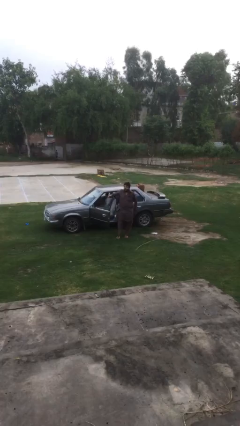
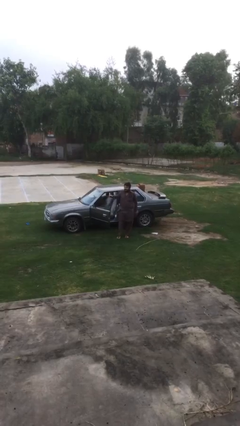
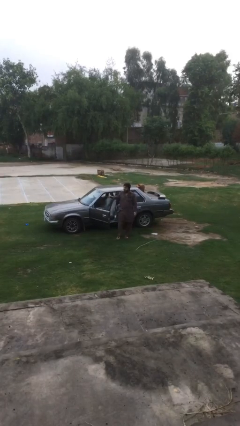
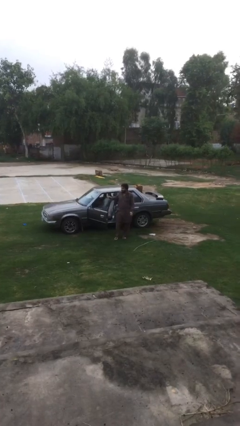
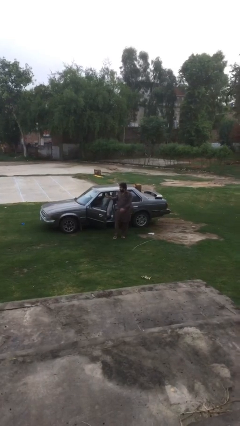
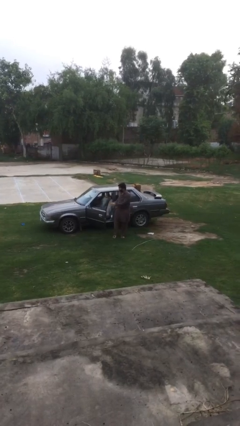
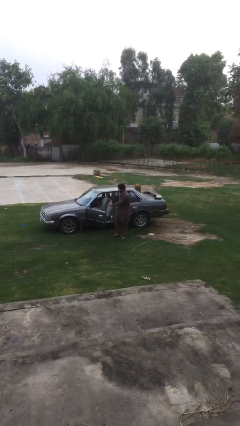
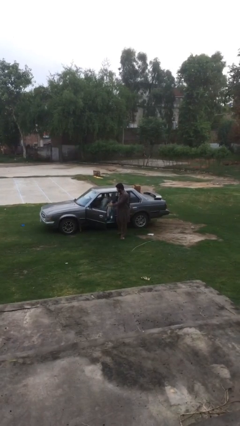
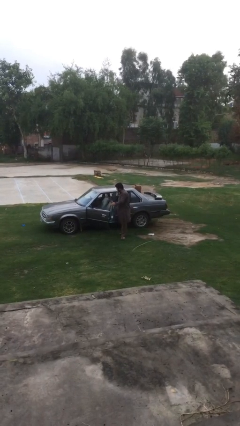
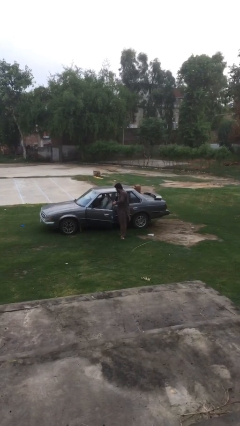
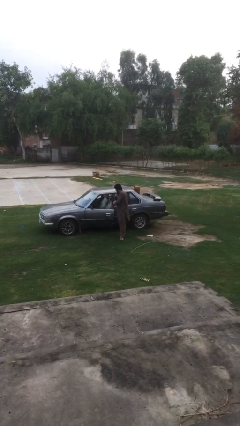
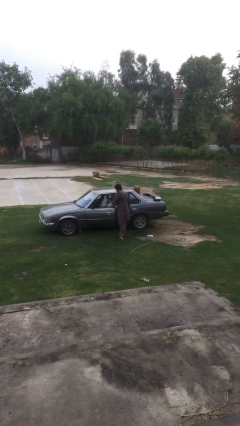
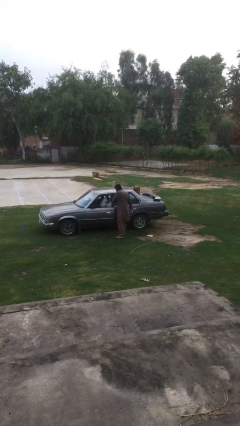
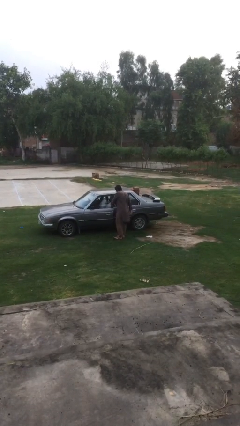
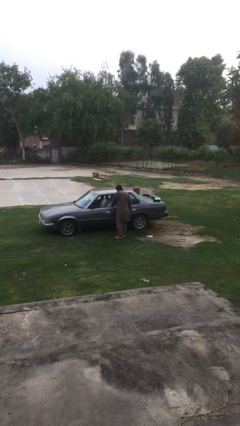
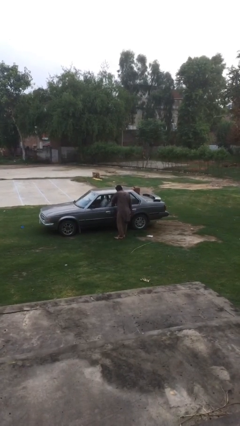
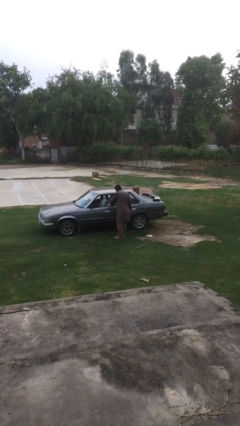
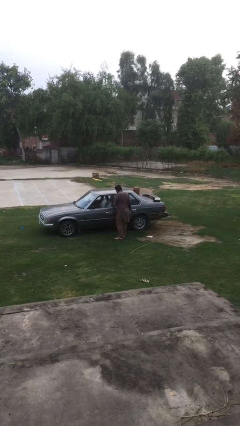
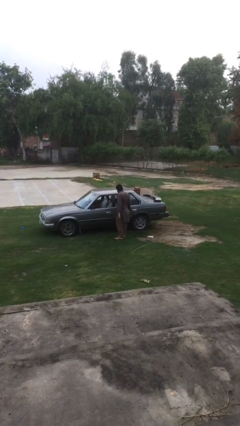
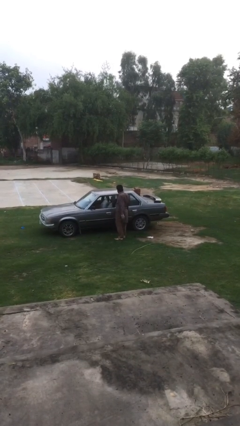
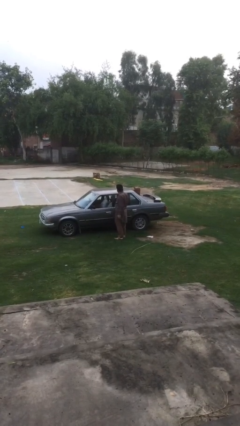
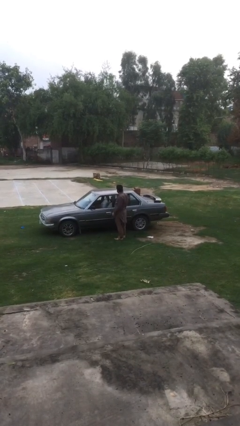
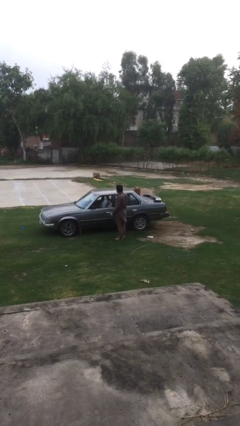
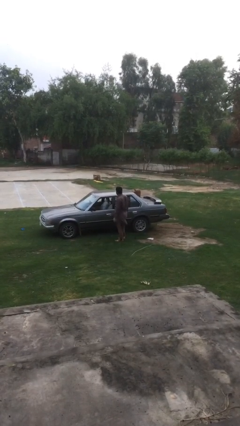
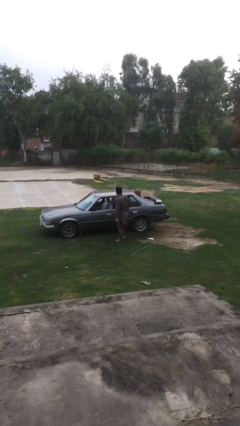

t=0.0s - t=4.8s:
person closes car door

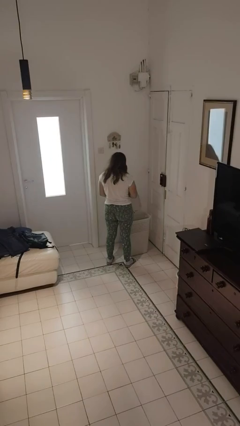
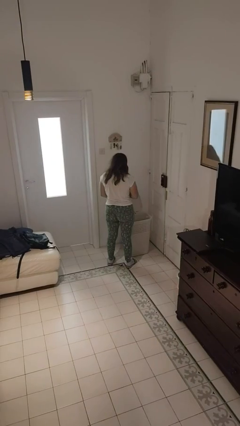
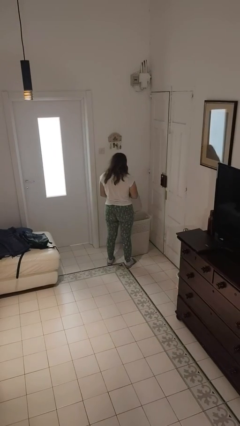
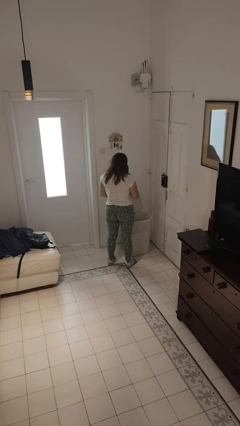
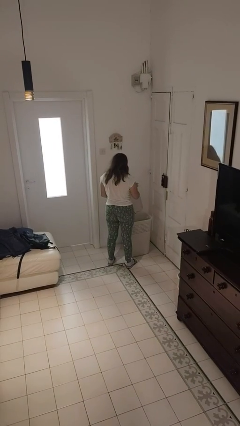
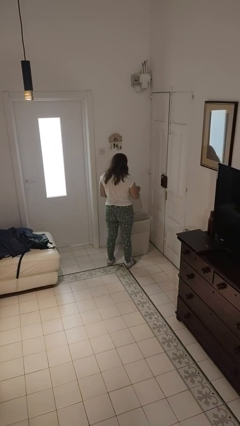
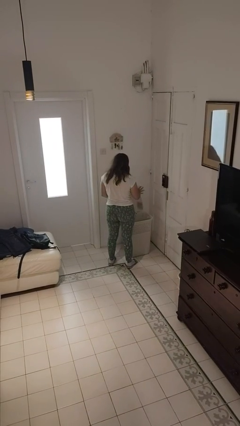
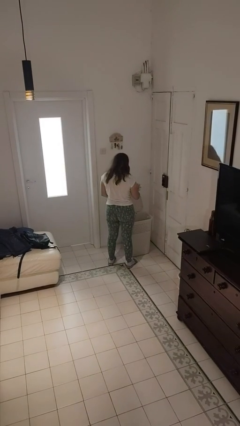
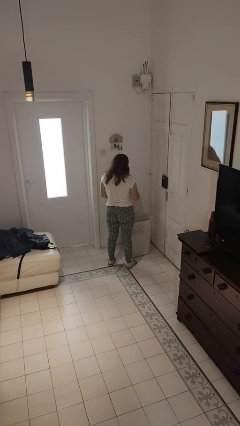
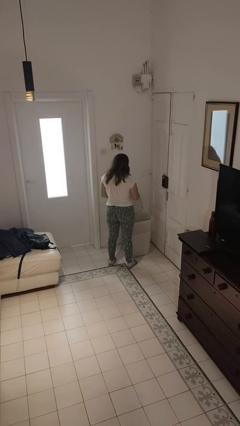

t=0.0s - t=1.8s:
person discards trash

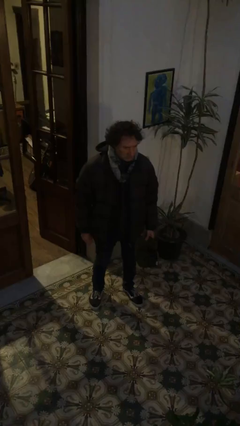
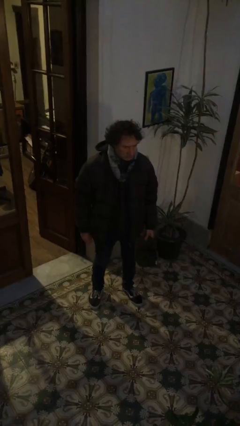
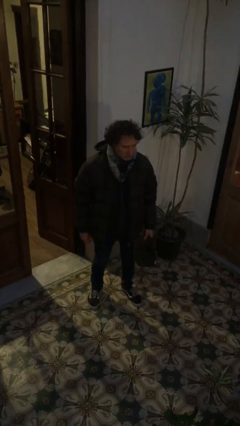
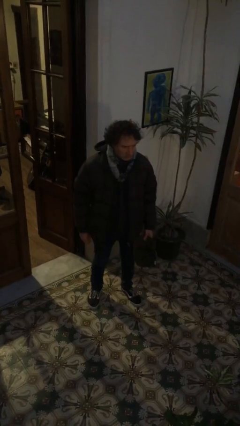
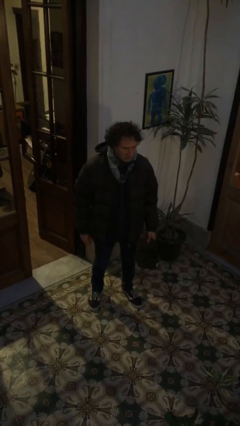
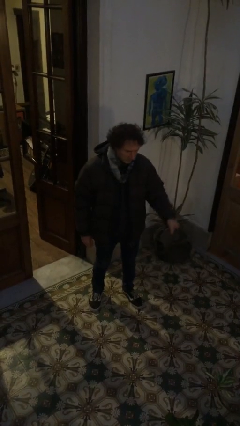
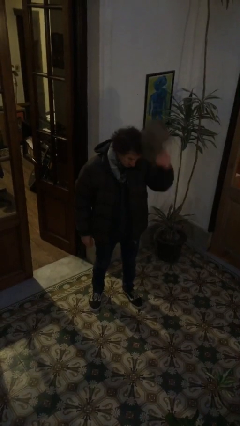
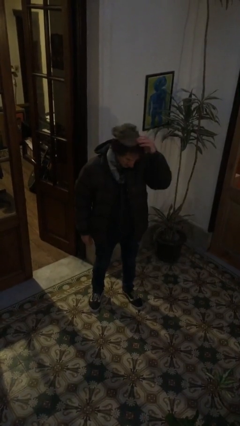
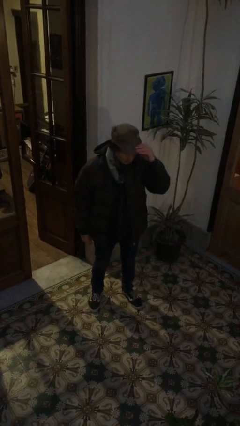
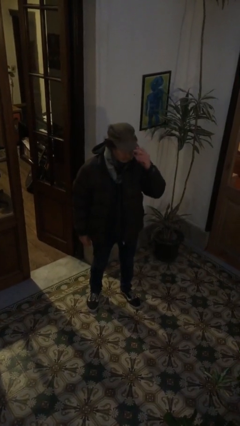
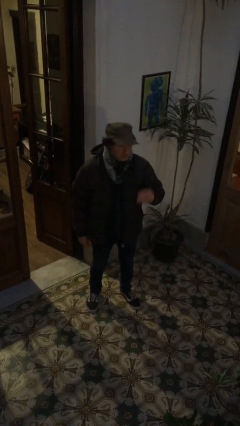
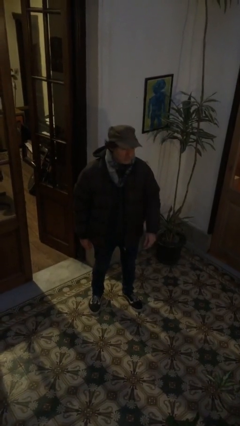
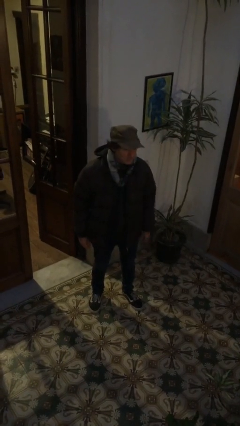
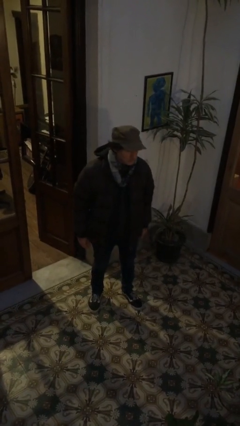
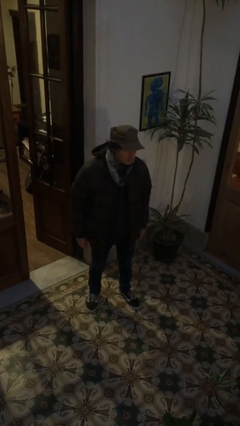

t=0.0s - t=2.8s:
person puts on hat

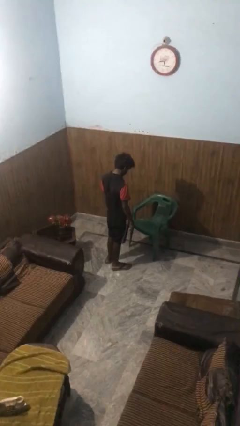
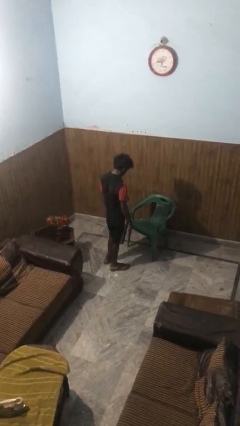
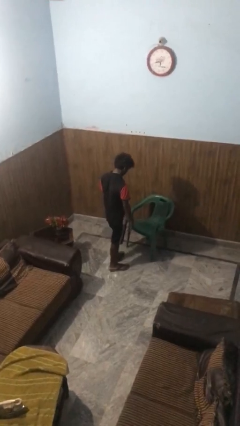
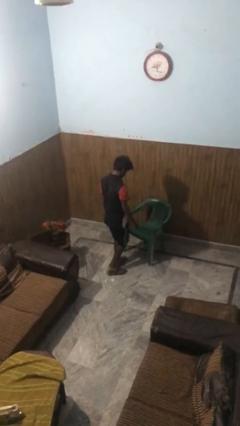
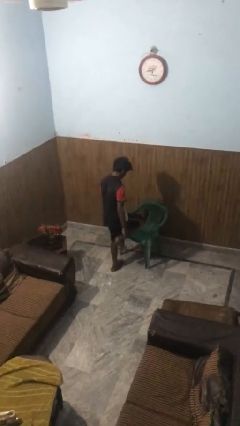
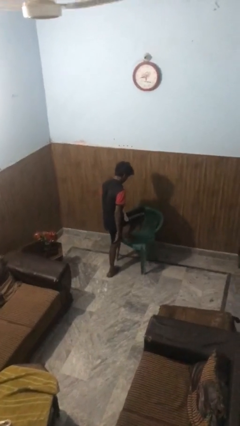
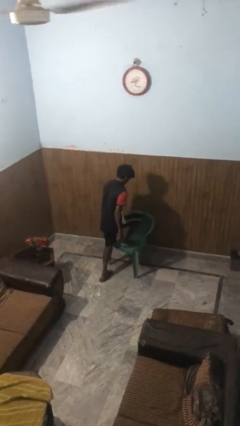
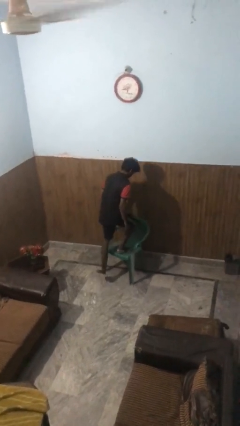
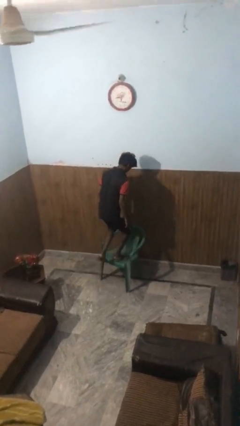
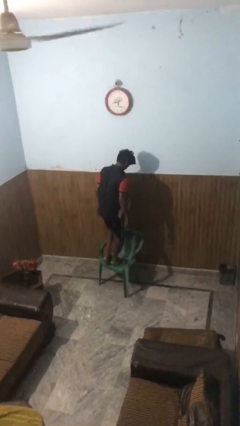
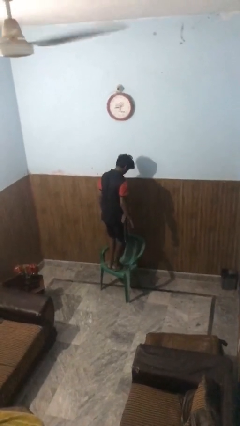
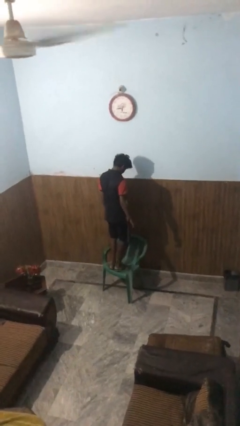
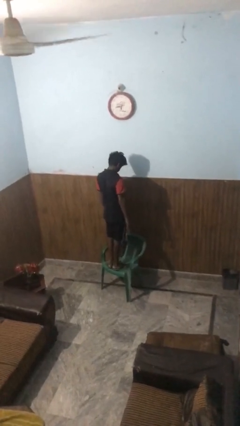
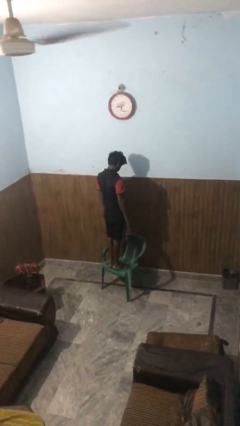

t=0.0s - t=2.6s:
person climbs on chair

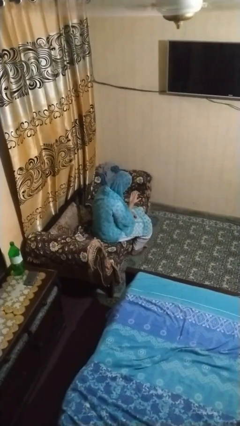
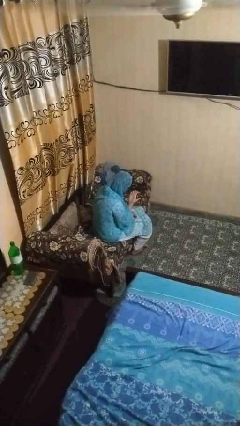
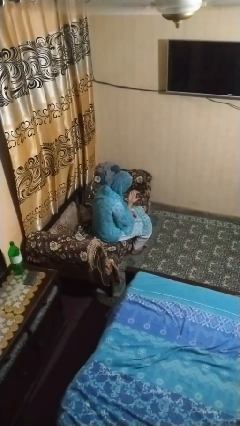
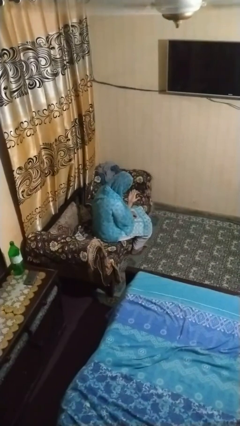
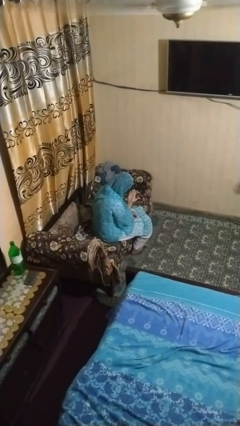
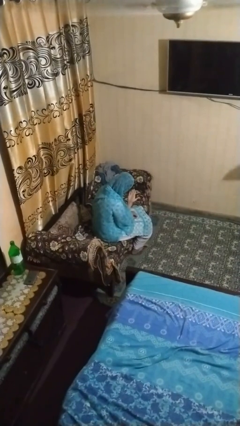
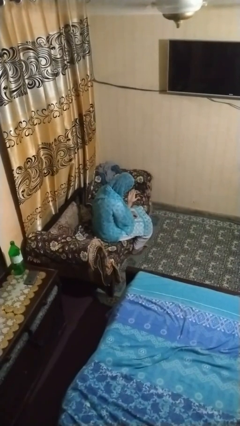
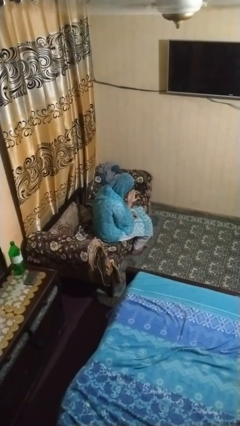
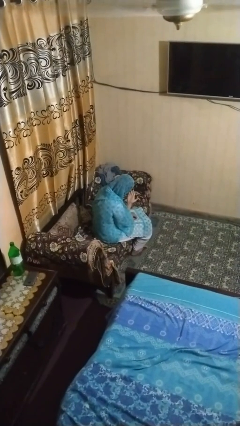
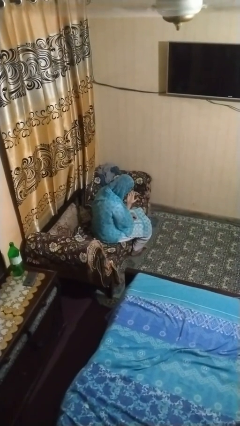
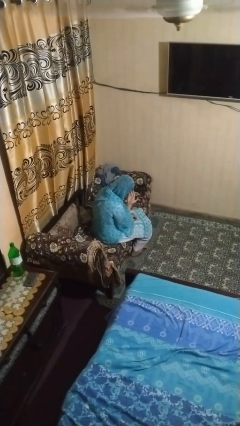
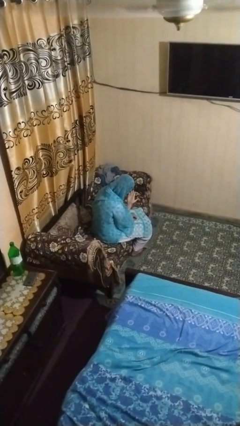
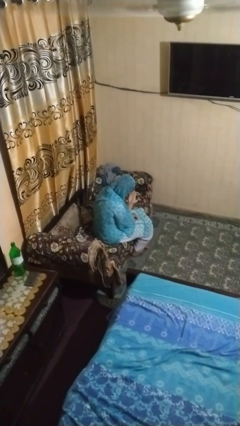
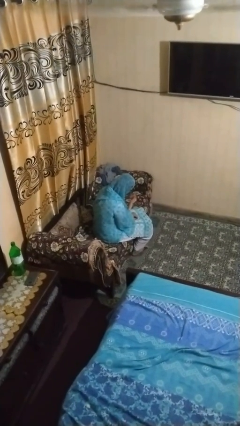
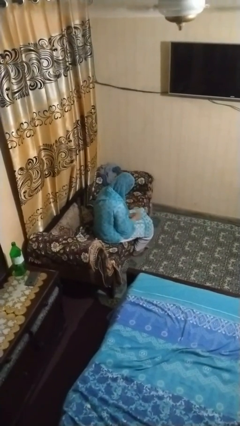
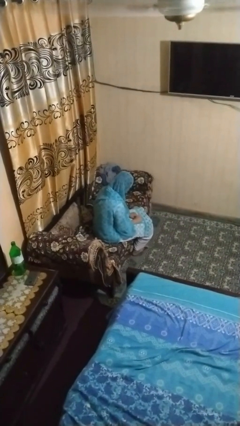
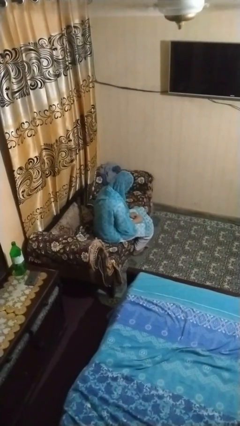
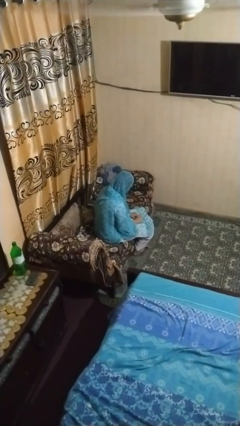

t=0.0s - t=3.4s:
person looks at hands in lap

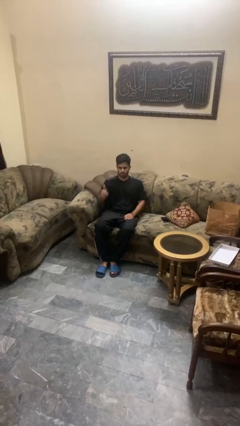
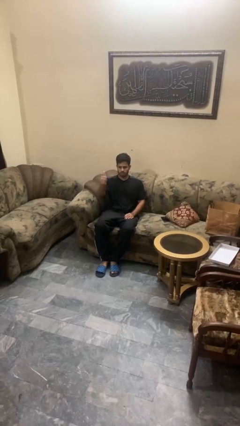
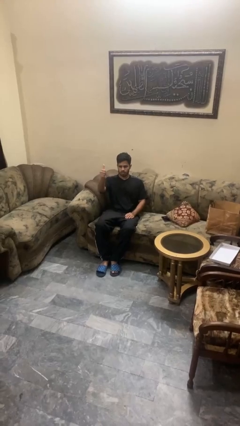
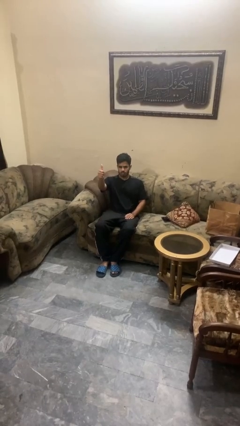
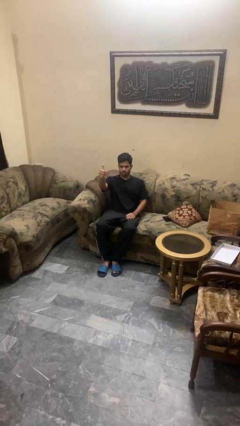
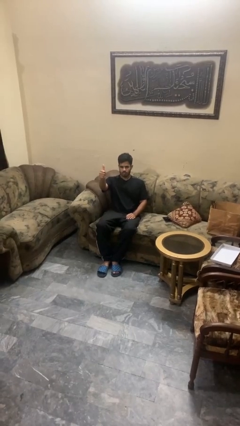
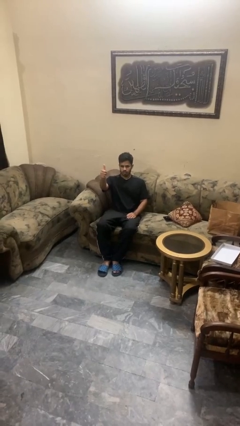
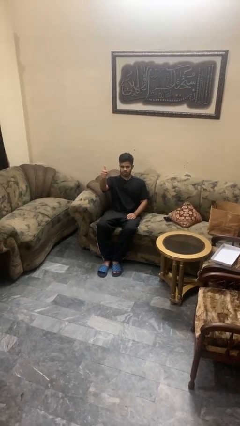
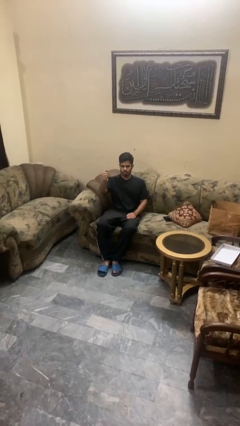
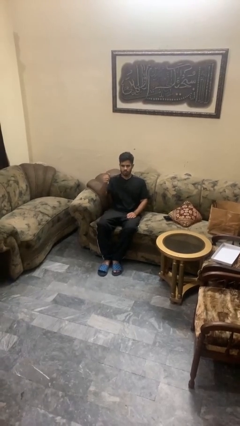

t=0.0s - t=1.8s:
person gestures thumbs up

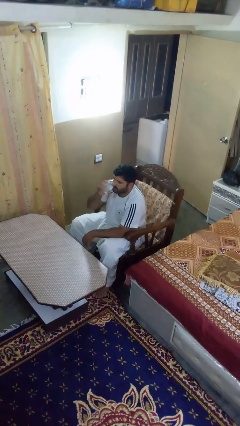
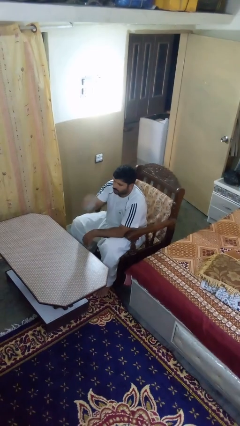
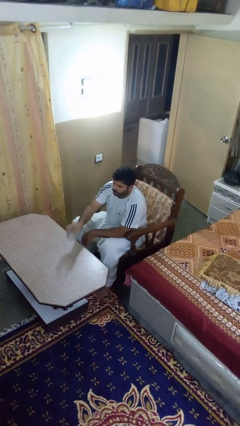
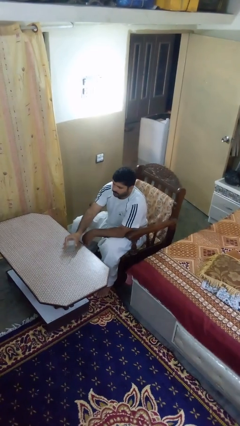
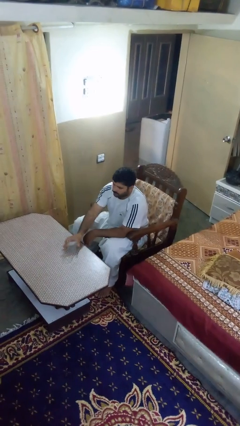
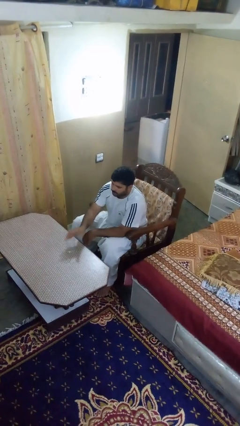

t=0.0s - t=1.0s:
person puts down object on table
